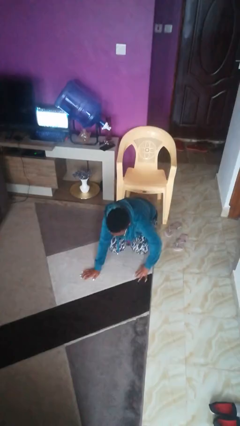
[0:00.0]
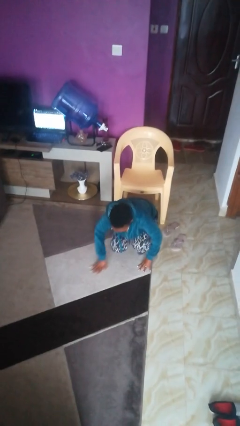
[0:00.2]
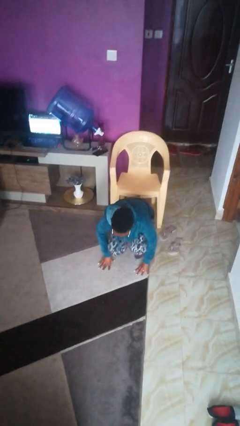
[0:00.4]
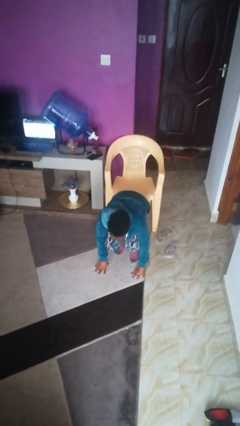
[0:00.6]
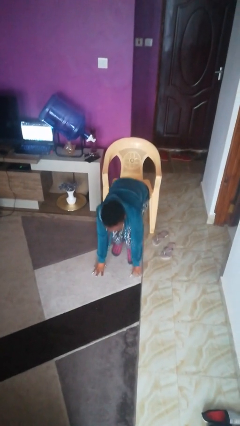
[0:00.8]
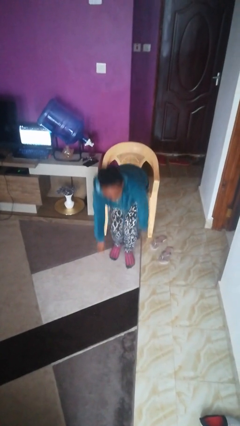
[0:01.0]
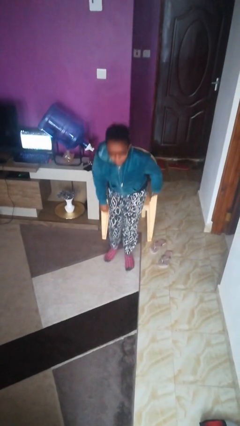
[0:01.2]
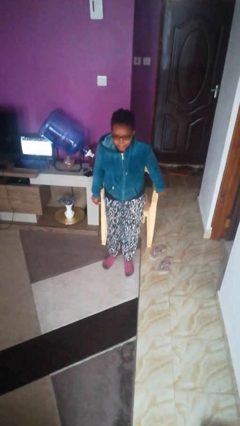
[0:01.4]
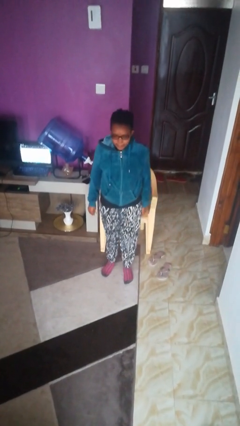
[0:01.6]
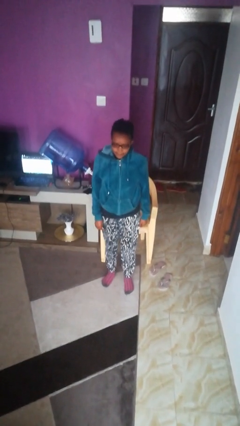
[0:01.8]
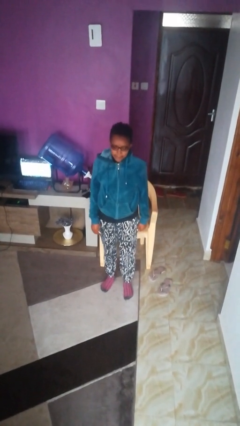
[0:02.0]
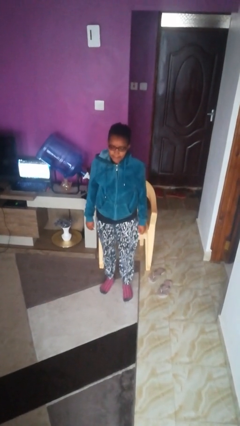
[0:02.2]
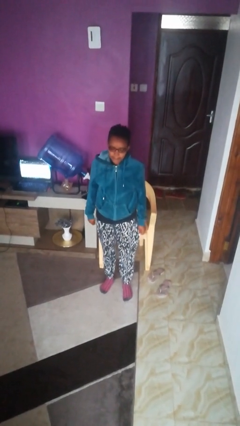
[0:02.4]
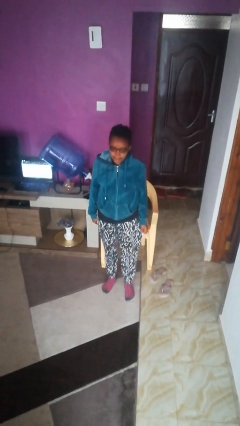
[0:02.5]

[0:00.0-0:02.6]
person stands up from floor

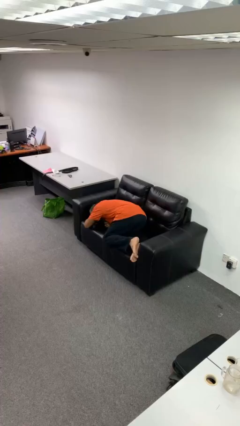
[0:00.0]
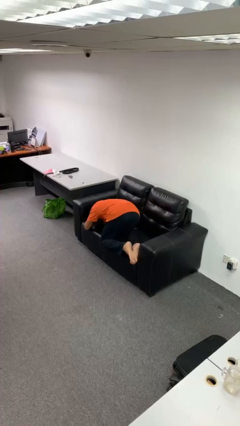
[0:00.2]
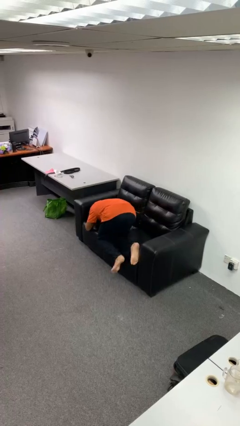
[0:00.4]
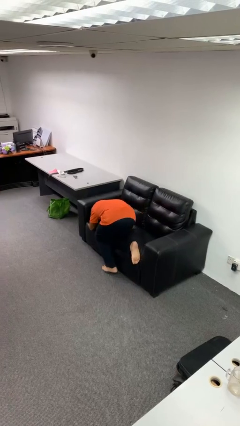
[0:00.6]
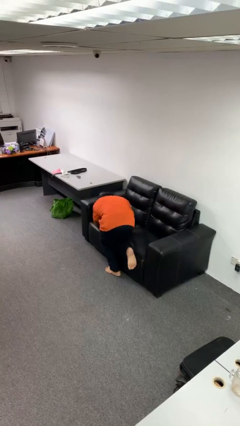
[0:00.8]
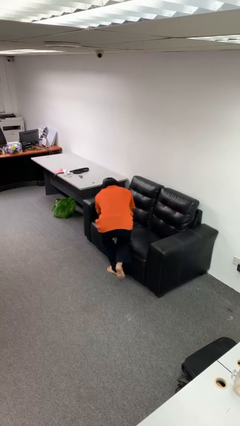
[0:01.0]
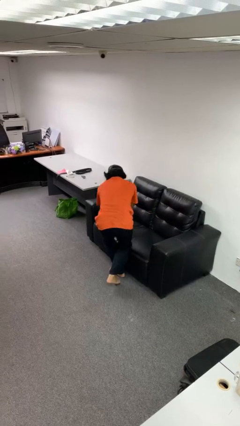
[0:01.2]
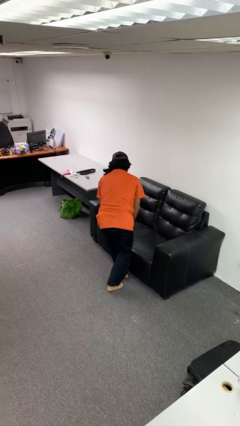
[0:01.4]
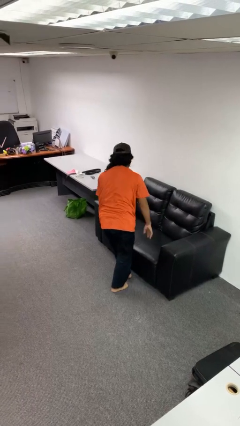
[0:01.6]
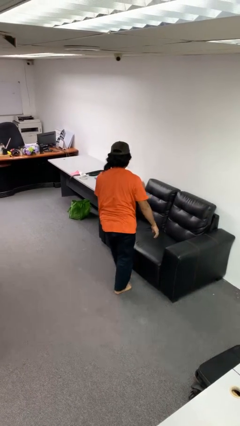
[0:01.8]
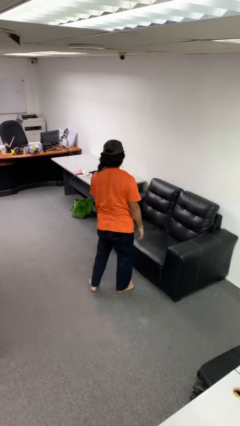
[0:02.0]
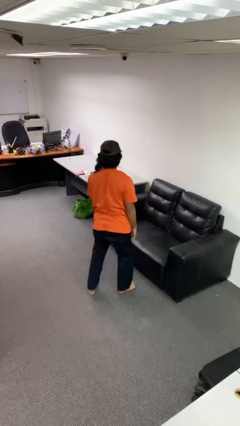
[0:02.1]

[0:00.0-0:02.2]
person stands up

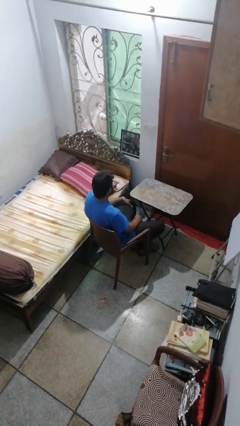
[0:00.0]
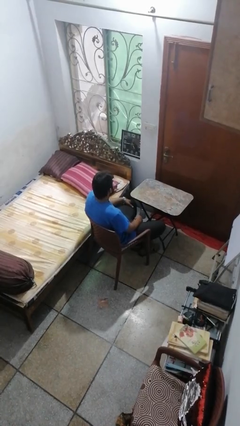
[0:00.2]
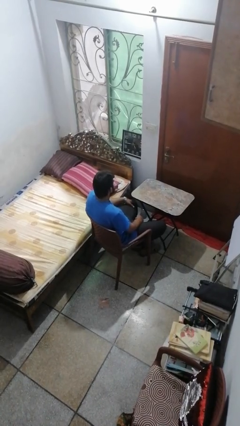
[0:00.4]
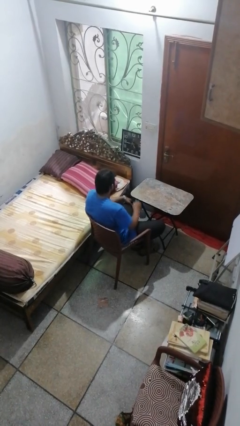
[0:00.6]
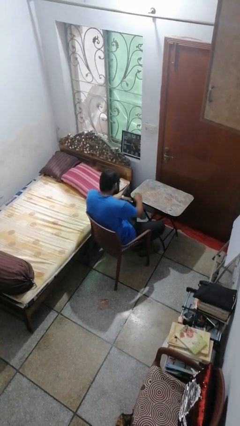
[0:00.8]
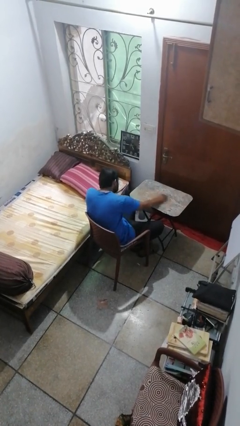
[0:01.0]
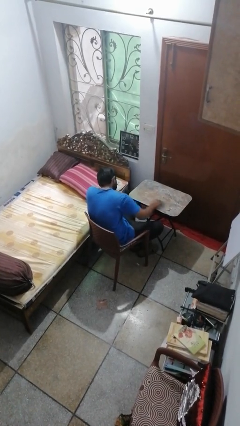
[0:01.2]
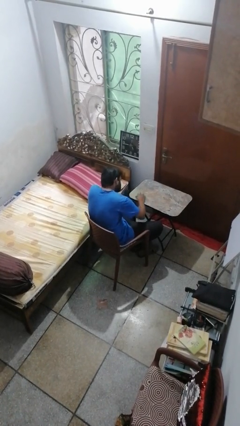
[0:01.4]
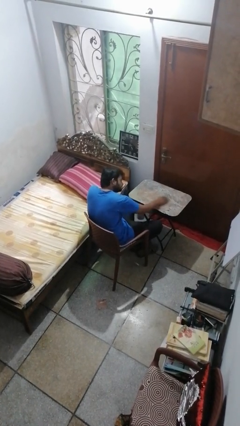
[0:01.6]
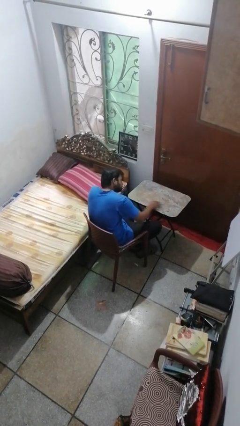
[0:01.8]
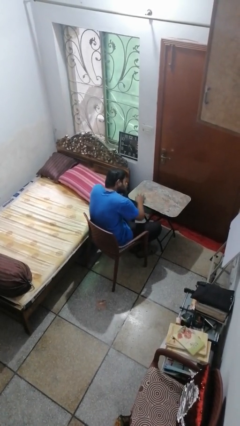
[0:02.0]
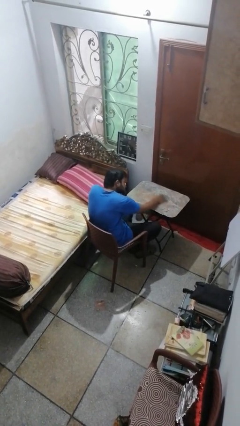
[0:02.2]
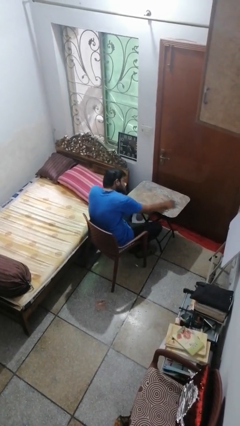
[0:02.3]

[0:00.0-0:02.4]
person cleans table with rag

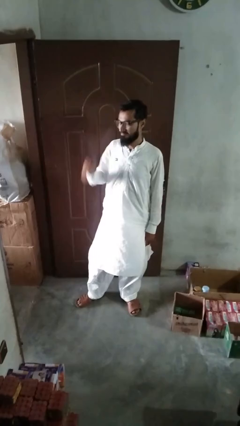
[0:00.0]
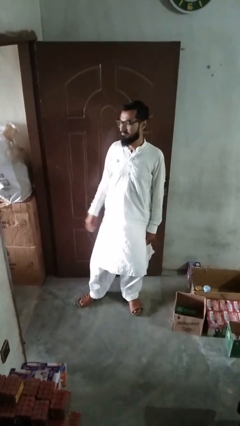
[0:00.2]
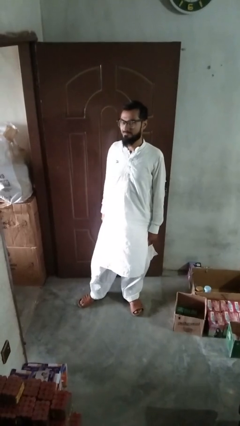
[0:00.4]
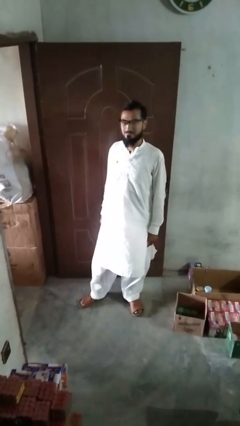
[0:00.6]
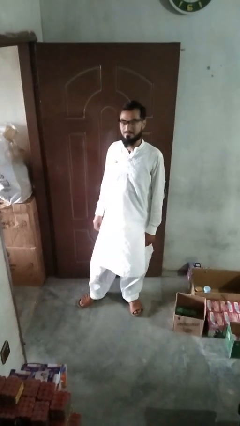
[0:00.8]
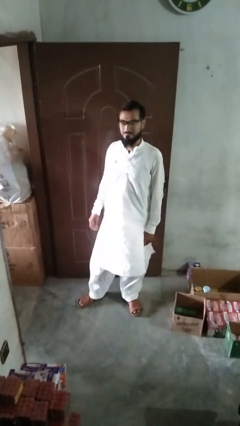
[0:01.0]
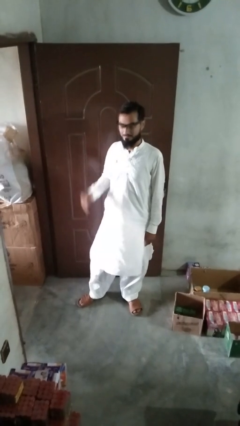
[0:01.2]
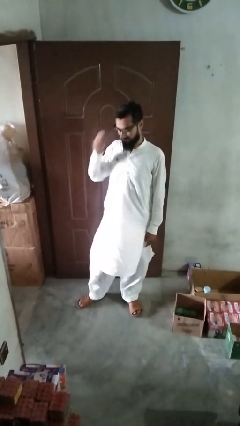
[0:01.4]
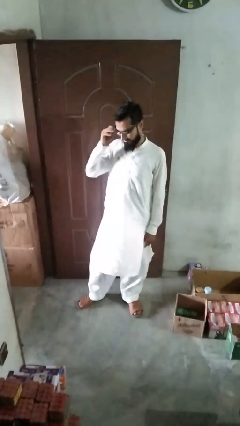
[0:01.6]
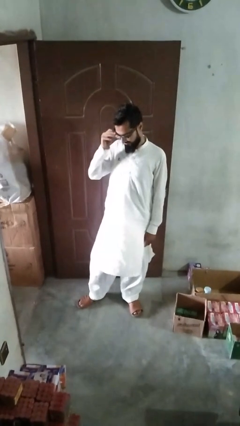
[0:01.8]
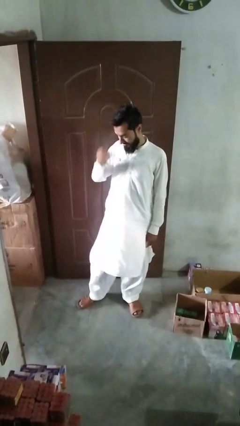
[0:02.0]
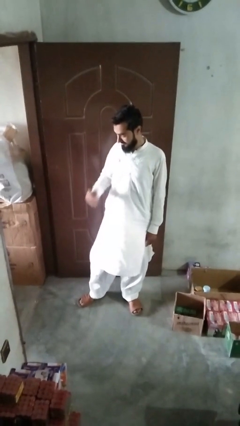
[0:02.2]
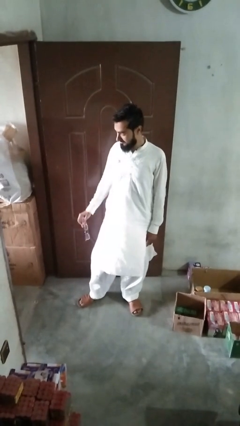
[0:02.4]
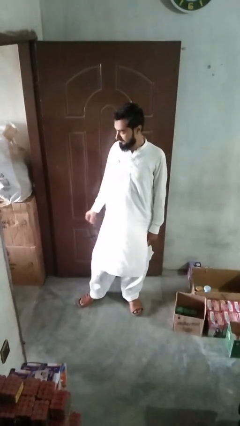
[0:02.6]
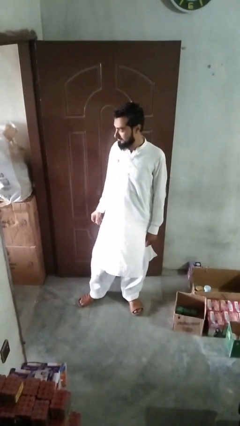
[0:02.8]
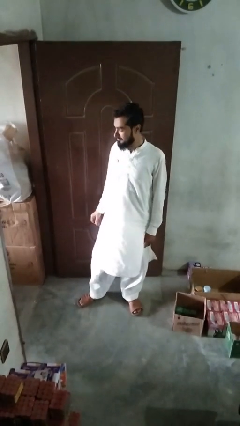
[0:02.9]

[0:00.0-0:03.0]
person takes off glasses

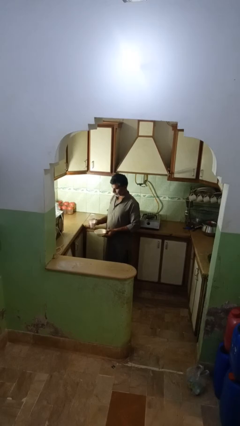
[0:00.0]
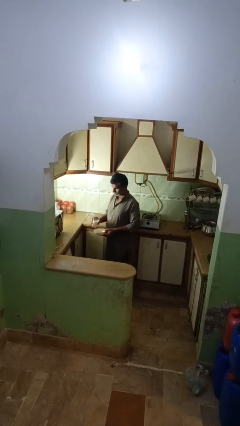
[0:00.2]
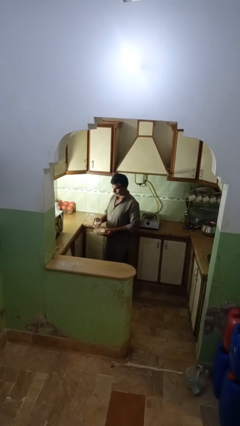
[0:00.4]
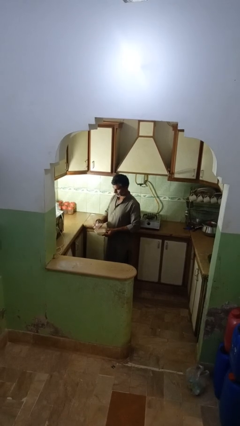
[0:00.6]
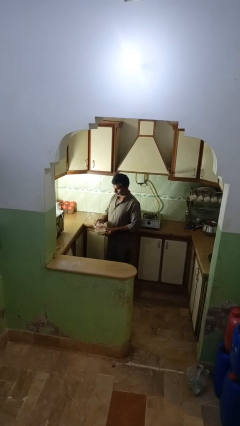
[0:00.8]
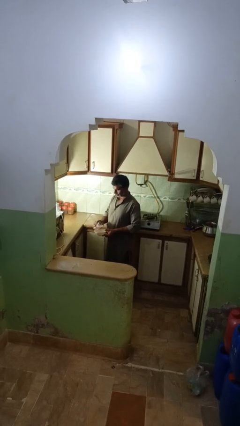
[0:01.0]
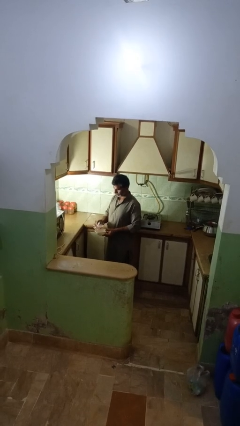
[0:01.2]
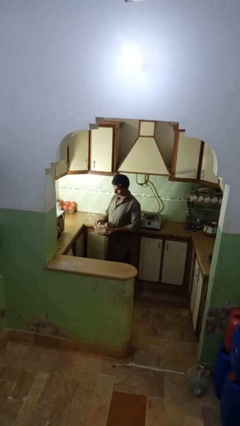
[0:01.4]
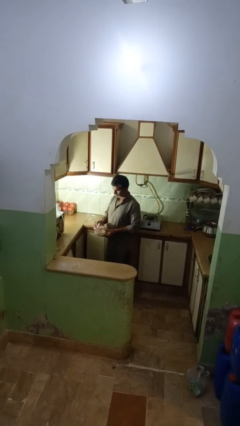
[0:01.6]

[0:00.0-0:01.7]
person pours into bowl

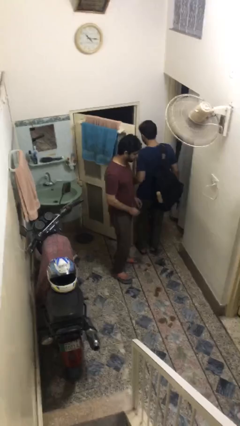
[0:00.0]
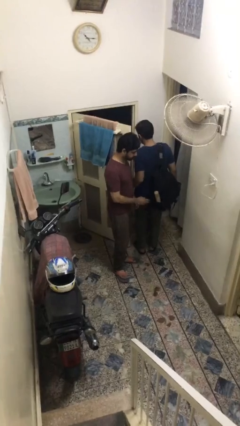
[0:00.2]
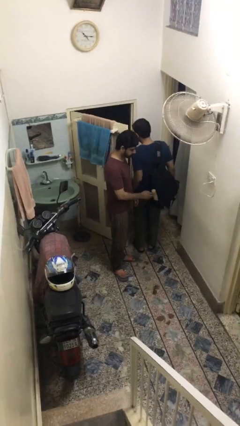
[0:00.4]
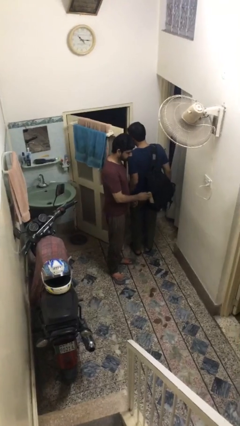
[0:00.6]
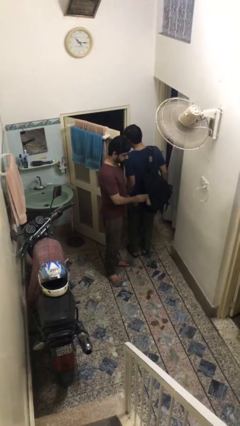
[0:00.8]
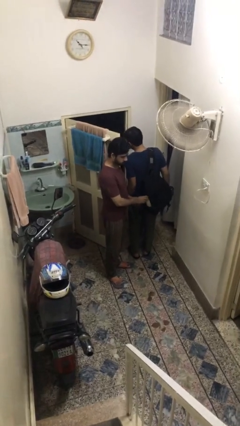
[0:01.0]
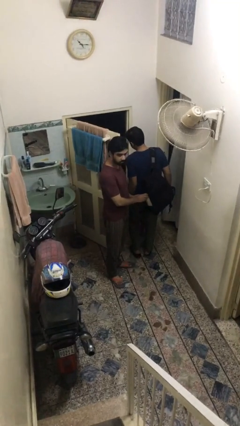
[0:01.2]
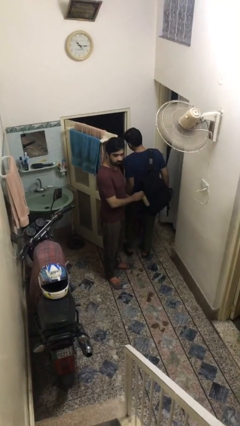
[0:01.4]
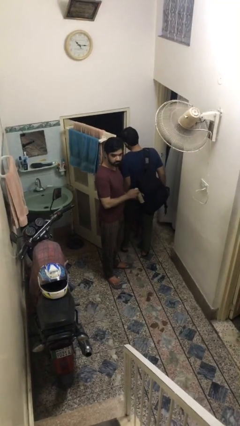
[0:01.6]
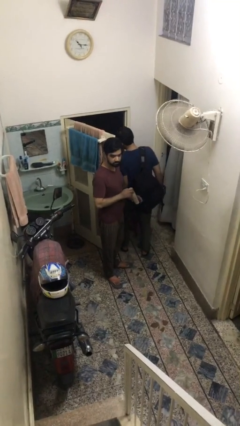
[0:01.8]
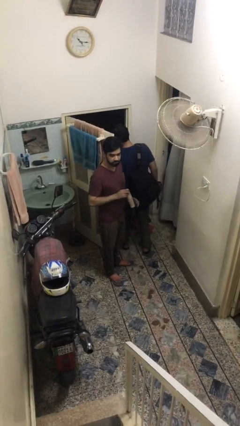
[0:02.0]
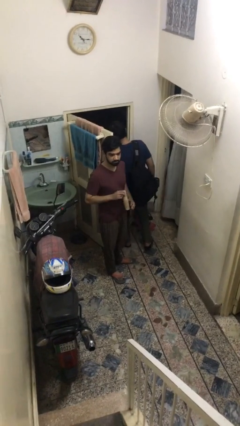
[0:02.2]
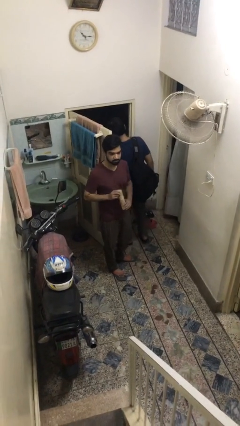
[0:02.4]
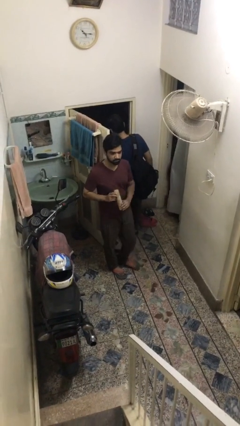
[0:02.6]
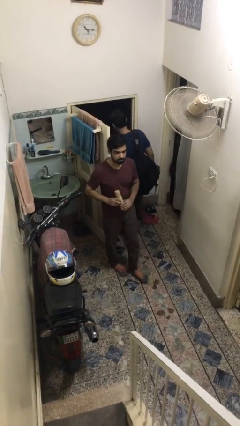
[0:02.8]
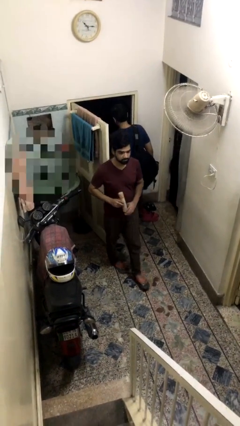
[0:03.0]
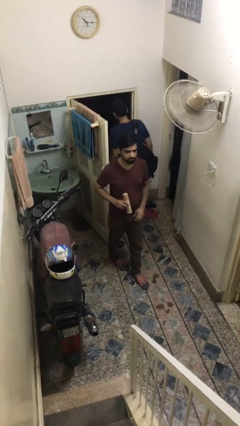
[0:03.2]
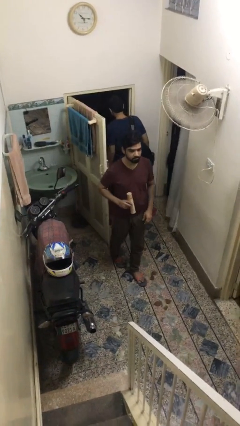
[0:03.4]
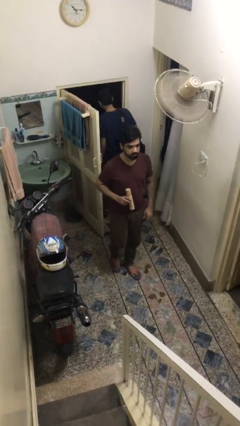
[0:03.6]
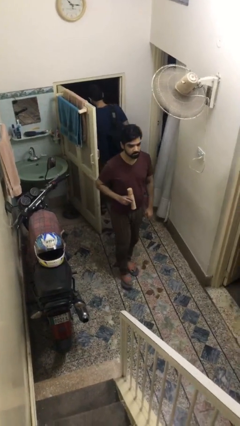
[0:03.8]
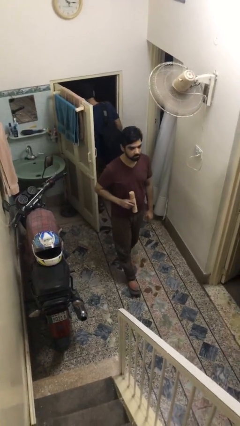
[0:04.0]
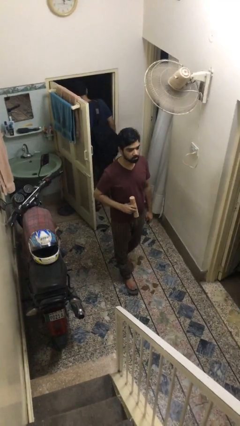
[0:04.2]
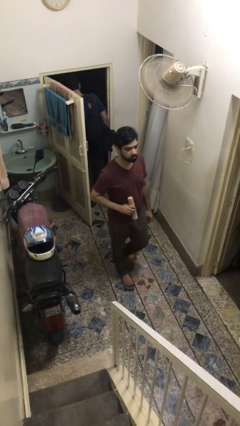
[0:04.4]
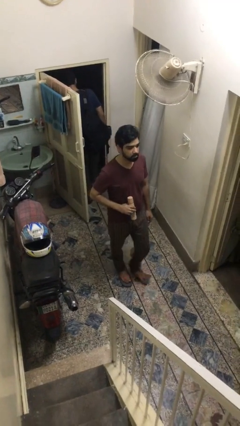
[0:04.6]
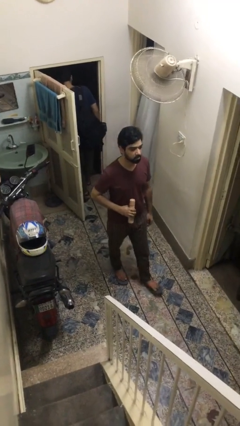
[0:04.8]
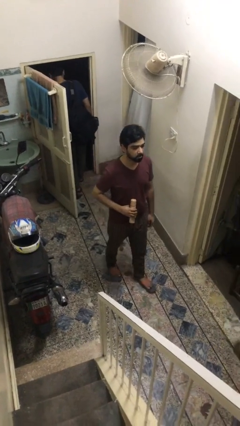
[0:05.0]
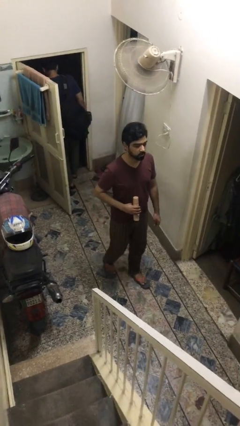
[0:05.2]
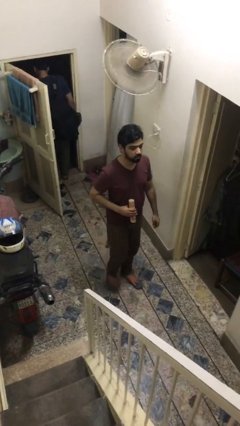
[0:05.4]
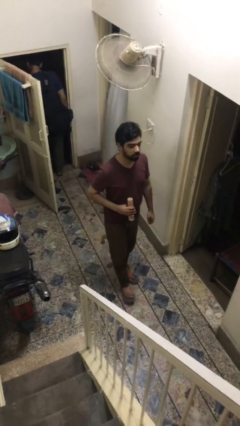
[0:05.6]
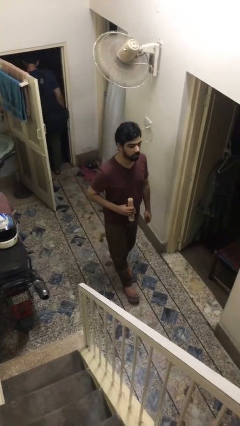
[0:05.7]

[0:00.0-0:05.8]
person steals object from person
